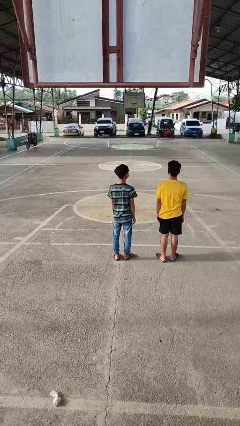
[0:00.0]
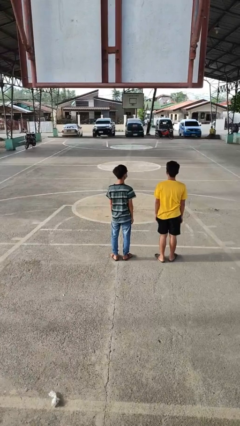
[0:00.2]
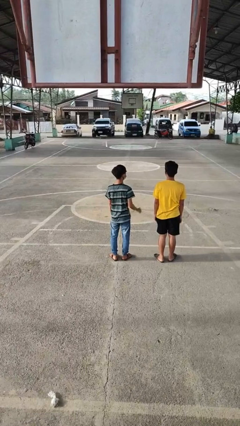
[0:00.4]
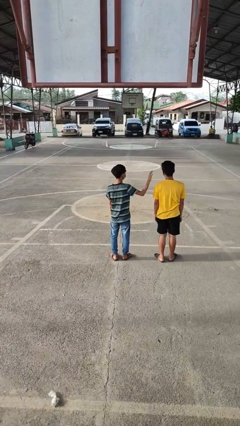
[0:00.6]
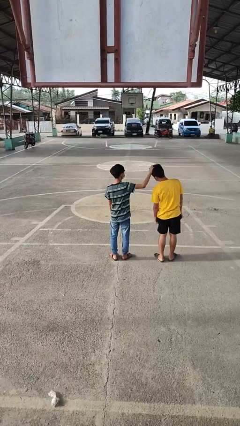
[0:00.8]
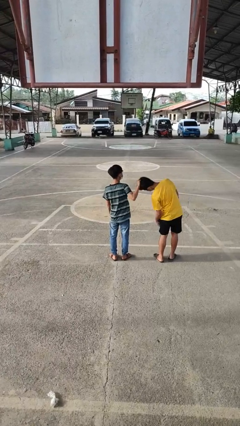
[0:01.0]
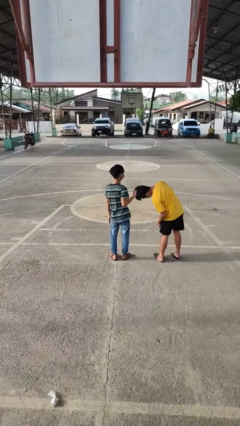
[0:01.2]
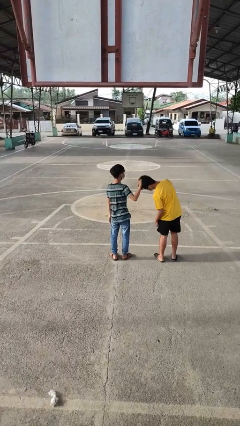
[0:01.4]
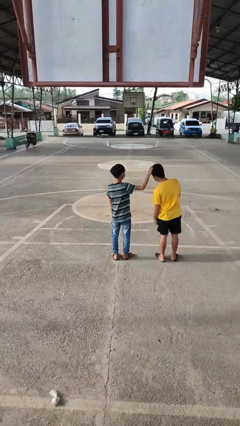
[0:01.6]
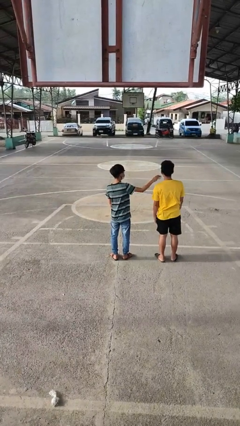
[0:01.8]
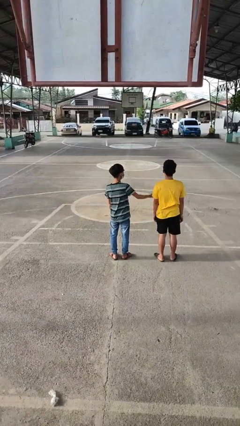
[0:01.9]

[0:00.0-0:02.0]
person grabs person by hair

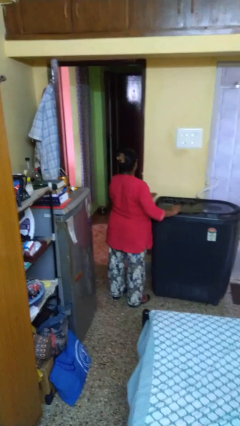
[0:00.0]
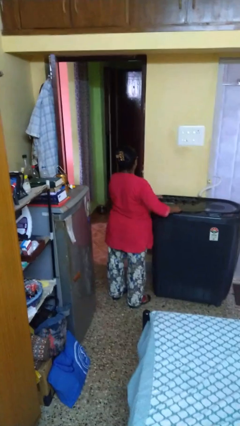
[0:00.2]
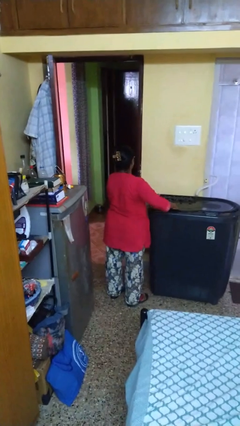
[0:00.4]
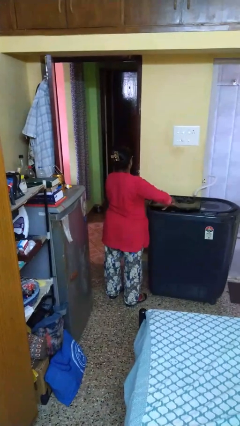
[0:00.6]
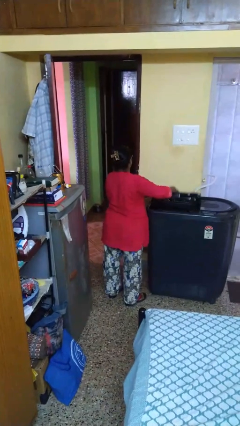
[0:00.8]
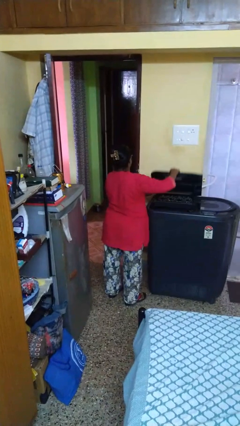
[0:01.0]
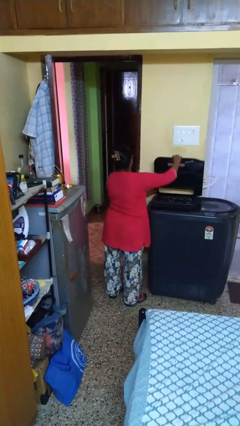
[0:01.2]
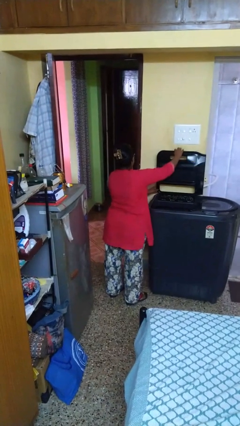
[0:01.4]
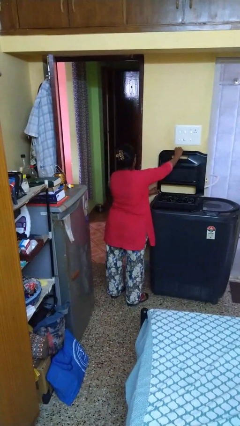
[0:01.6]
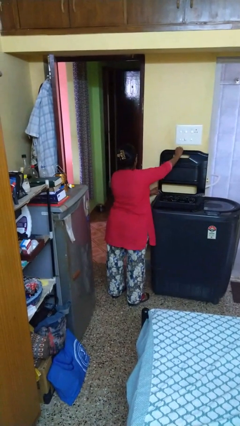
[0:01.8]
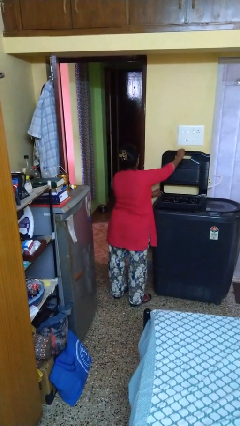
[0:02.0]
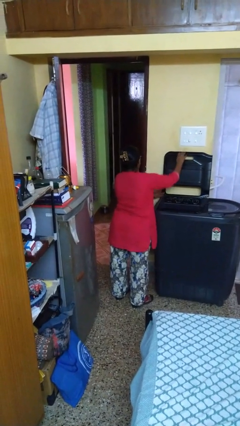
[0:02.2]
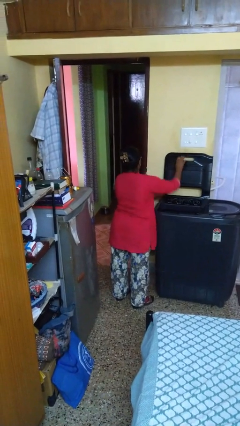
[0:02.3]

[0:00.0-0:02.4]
person opens clothes washer

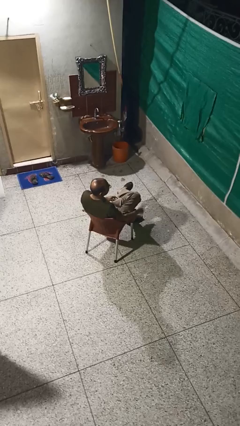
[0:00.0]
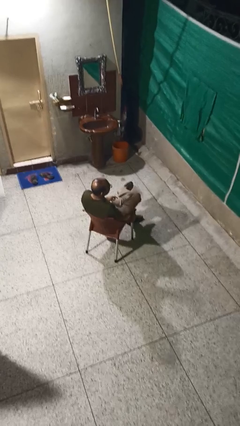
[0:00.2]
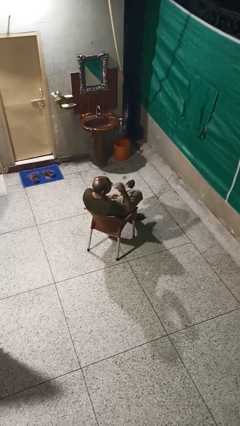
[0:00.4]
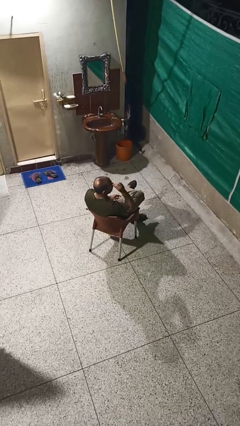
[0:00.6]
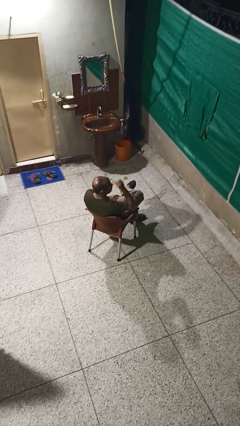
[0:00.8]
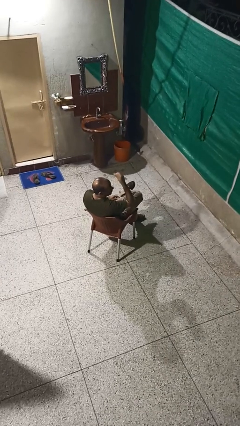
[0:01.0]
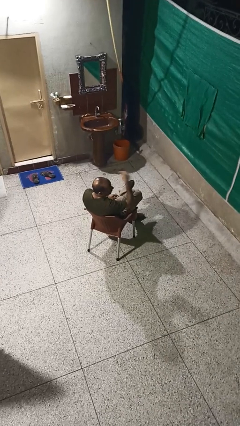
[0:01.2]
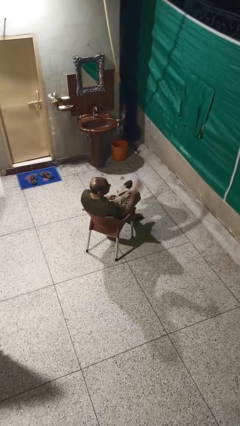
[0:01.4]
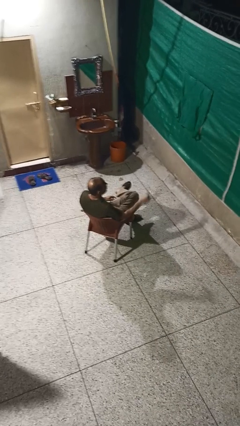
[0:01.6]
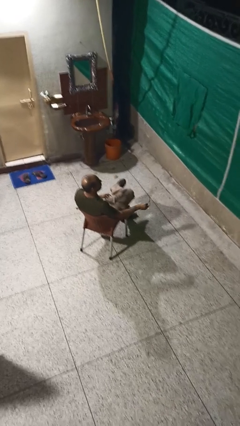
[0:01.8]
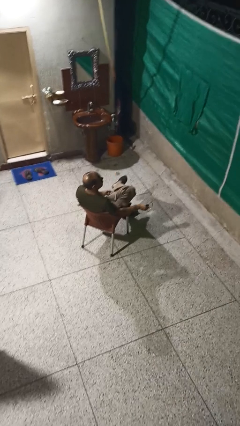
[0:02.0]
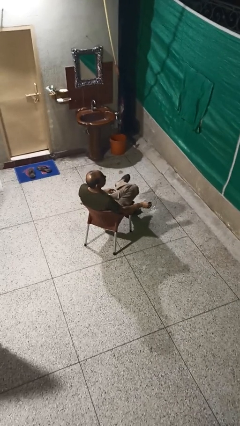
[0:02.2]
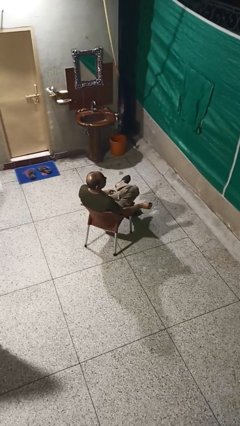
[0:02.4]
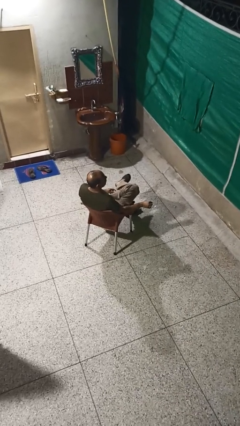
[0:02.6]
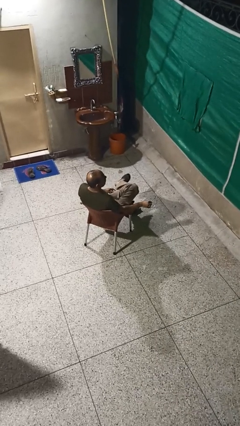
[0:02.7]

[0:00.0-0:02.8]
person takes off glasses

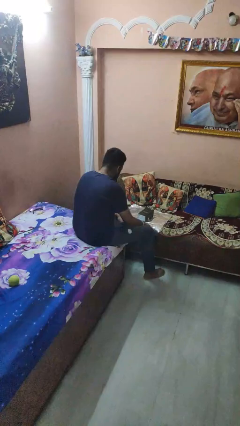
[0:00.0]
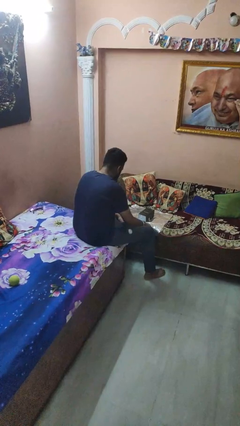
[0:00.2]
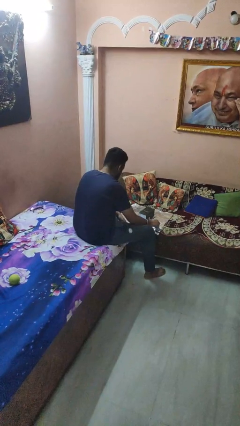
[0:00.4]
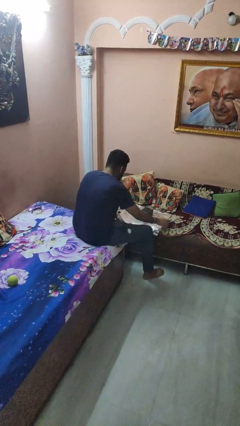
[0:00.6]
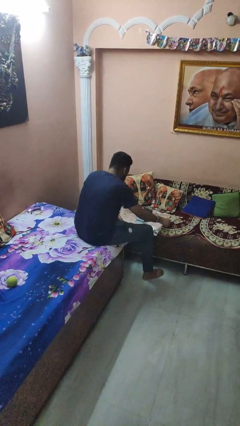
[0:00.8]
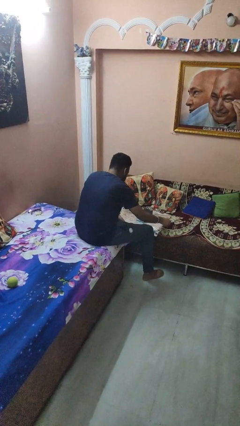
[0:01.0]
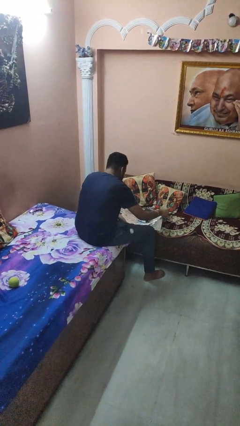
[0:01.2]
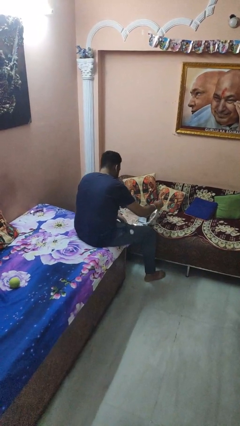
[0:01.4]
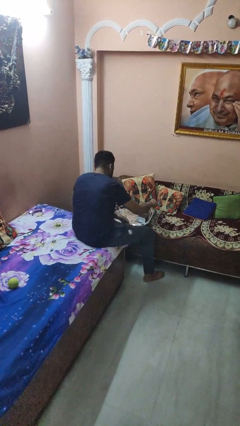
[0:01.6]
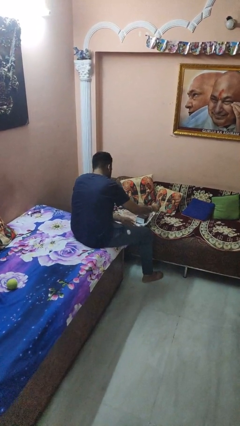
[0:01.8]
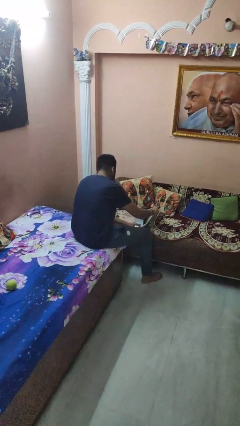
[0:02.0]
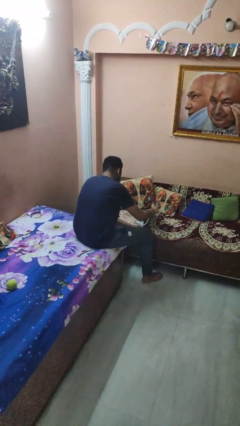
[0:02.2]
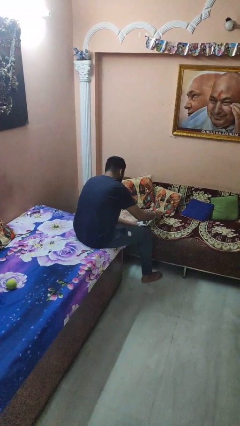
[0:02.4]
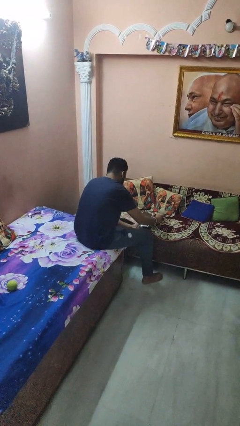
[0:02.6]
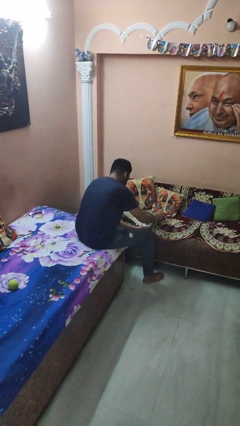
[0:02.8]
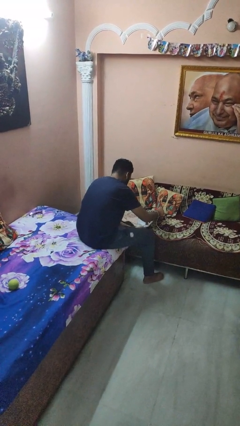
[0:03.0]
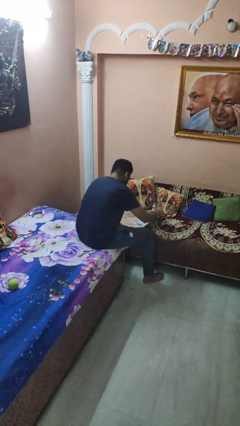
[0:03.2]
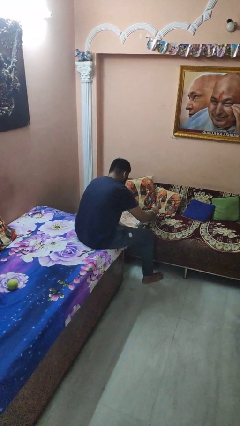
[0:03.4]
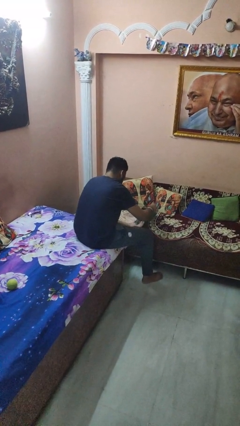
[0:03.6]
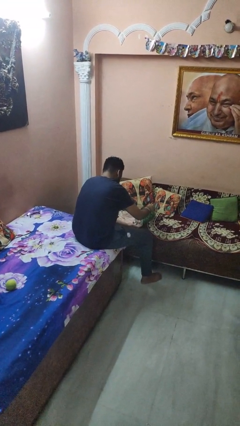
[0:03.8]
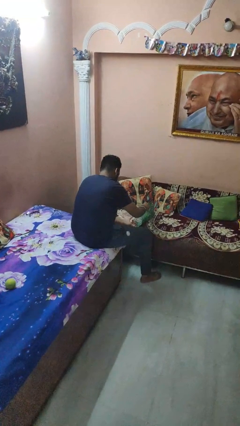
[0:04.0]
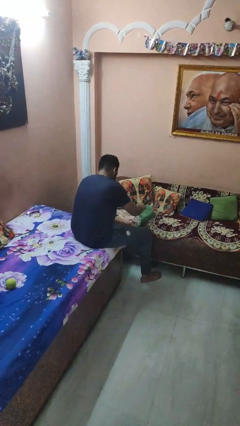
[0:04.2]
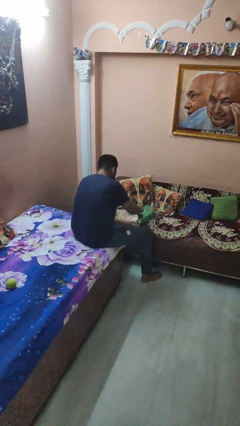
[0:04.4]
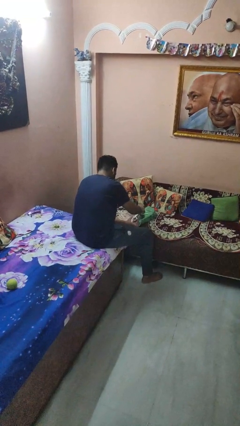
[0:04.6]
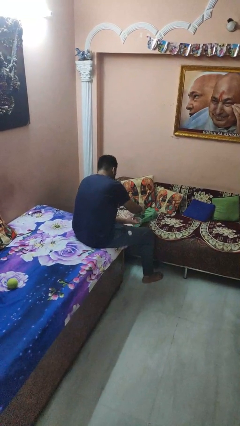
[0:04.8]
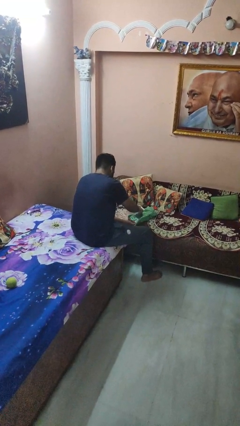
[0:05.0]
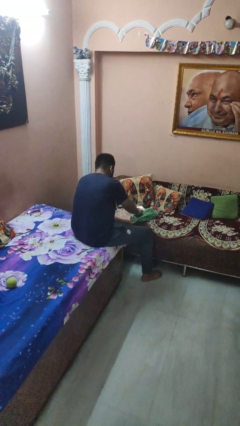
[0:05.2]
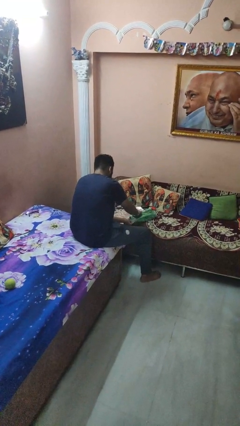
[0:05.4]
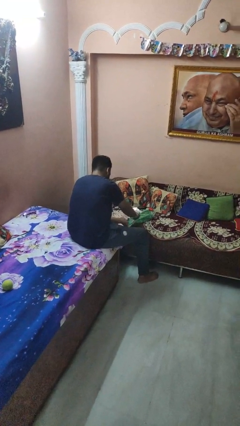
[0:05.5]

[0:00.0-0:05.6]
person wraps box

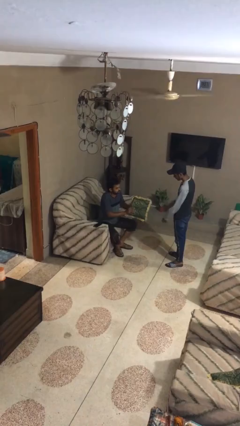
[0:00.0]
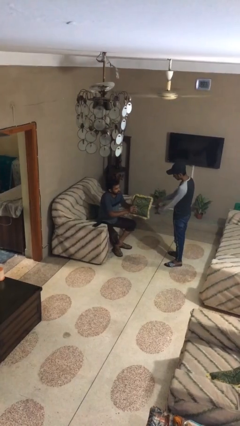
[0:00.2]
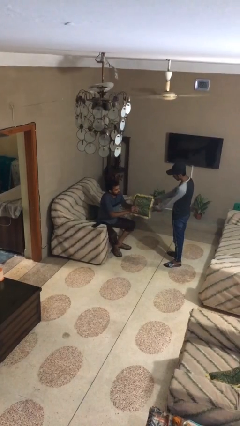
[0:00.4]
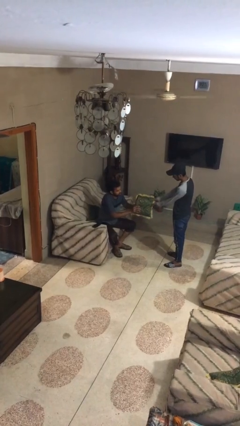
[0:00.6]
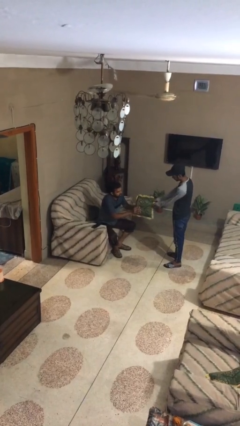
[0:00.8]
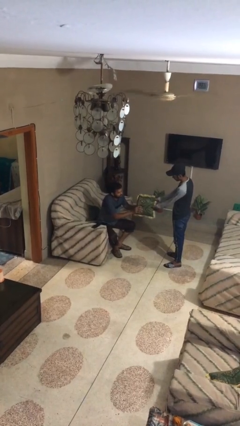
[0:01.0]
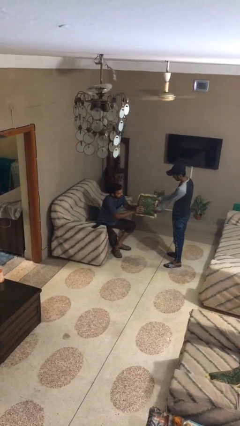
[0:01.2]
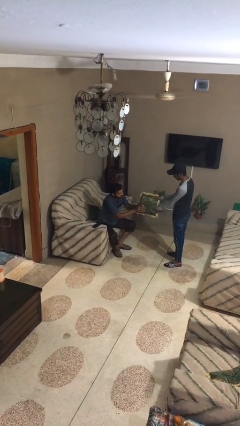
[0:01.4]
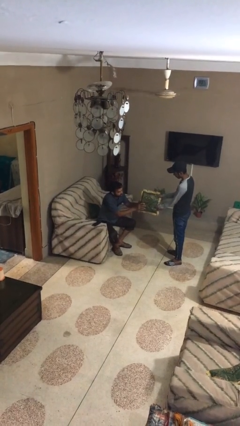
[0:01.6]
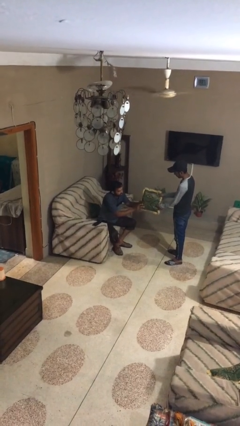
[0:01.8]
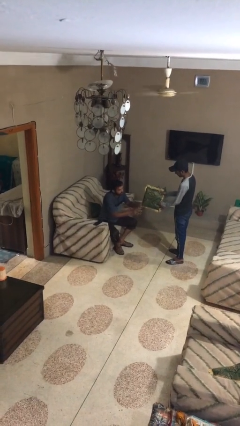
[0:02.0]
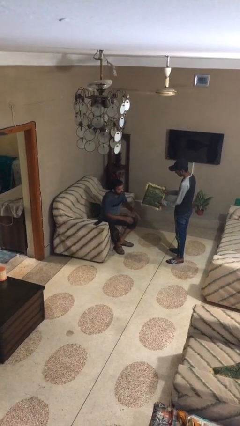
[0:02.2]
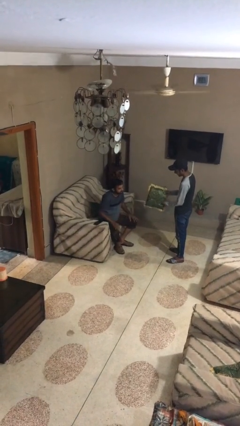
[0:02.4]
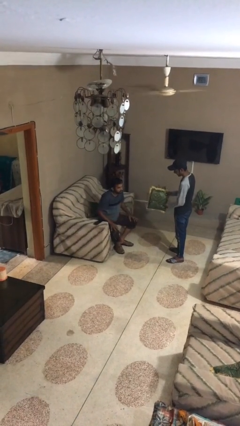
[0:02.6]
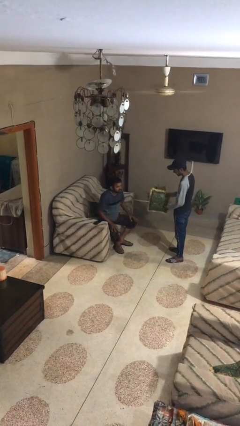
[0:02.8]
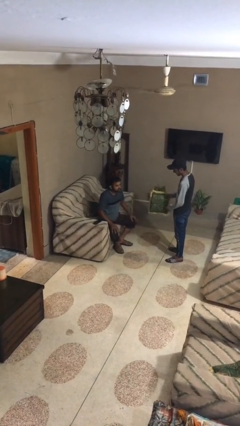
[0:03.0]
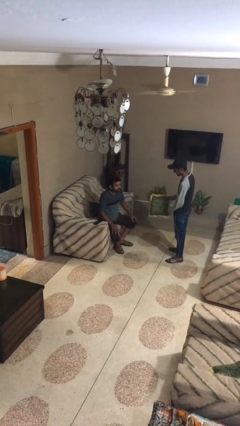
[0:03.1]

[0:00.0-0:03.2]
person transfers object to person

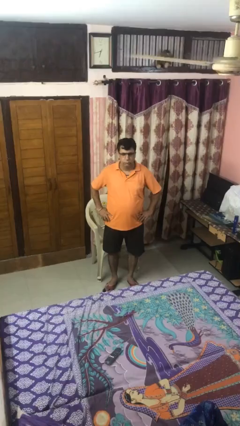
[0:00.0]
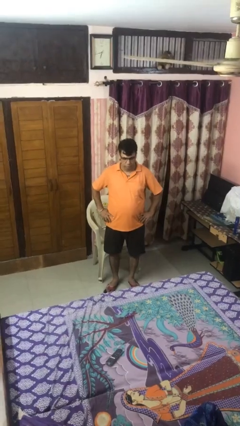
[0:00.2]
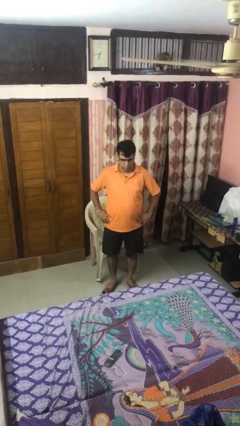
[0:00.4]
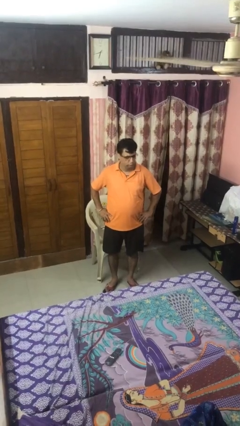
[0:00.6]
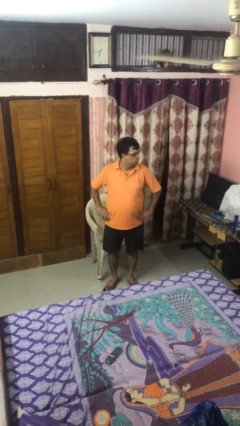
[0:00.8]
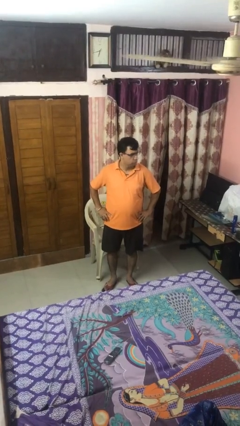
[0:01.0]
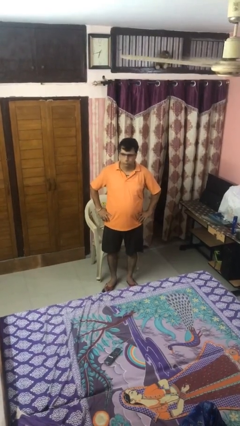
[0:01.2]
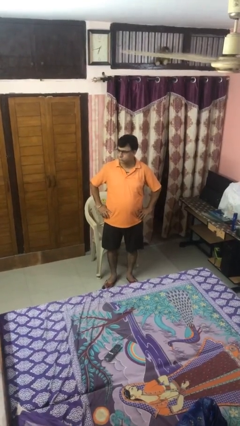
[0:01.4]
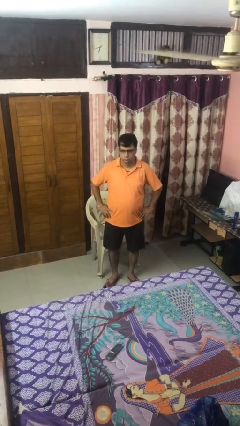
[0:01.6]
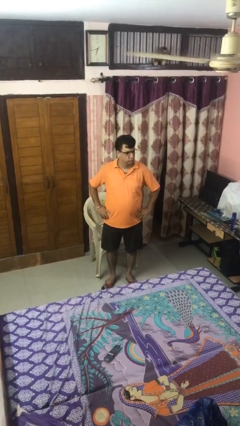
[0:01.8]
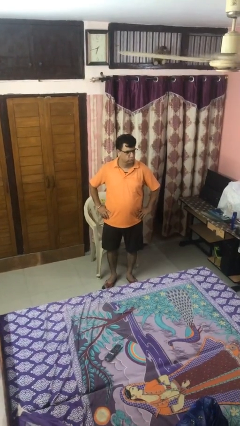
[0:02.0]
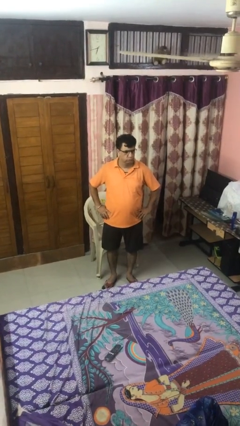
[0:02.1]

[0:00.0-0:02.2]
person shakes head
